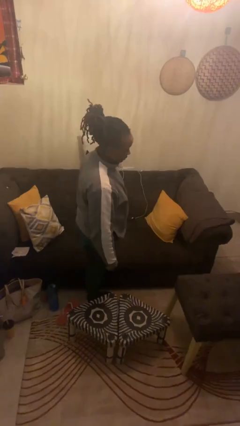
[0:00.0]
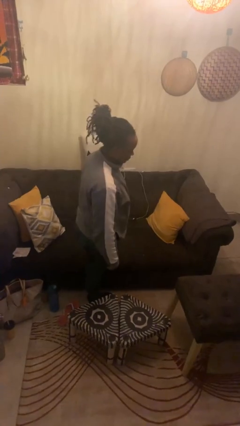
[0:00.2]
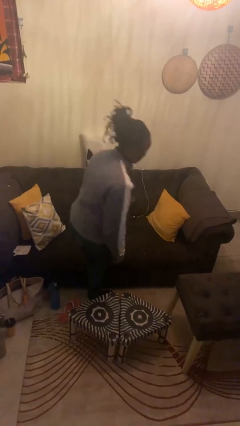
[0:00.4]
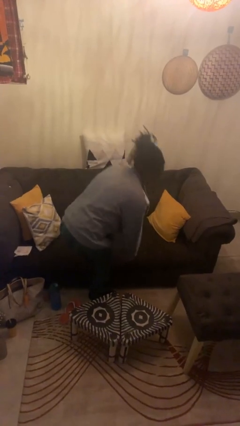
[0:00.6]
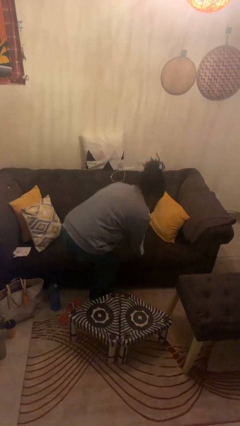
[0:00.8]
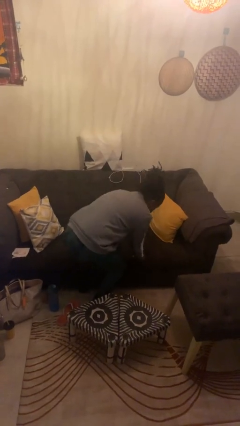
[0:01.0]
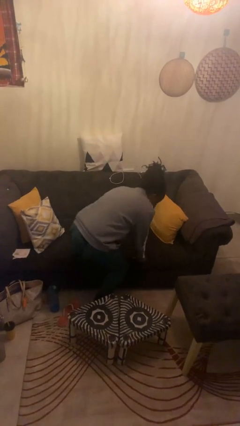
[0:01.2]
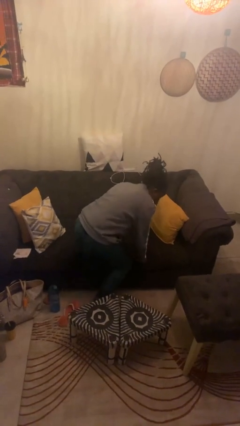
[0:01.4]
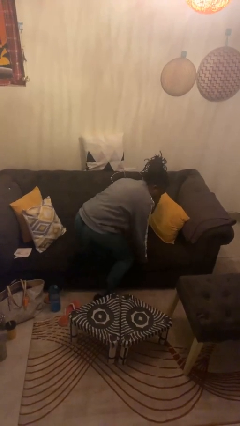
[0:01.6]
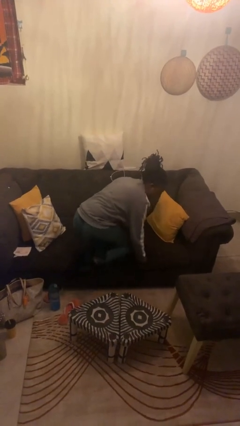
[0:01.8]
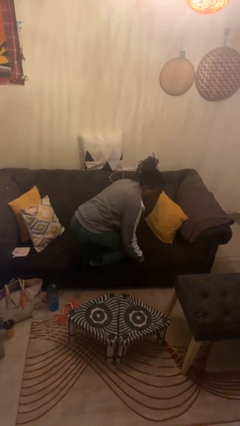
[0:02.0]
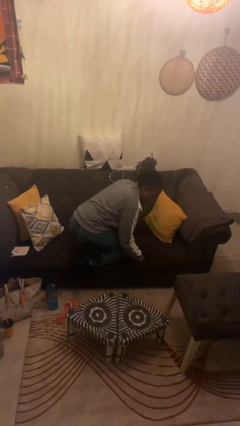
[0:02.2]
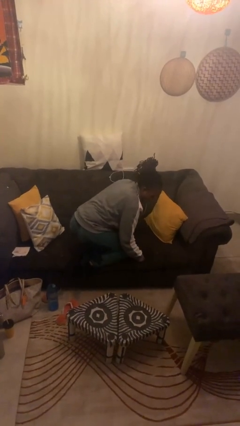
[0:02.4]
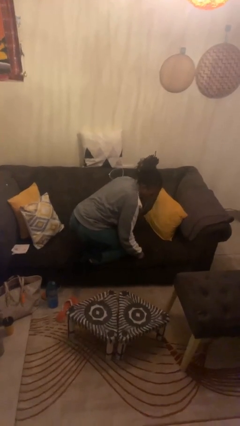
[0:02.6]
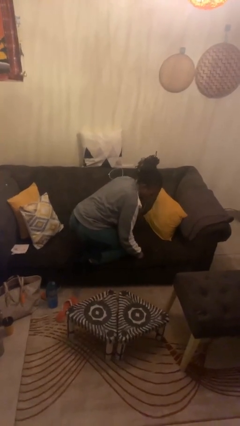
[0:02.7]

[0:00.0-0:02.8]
person climbs on couch

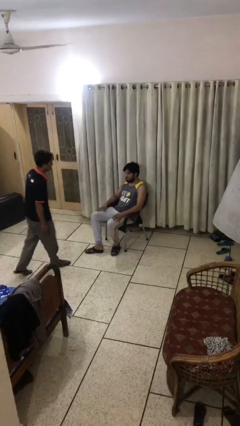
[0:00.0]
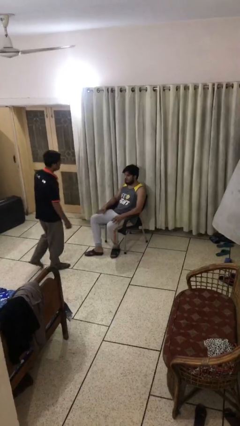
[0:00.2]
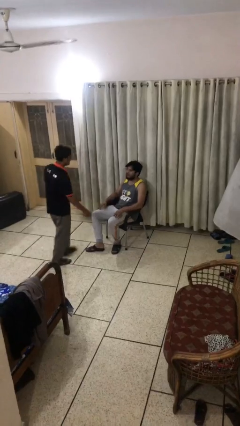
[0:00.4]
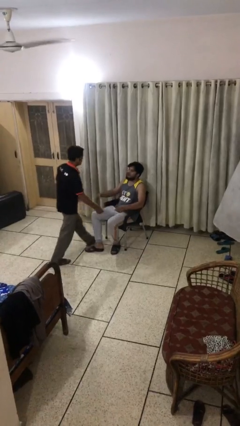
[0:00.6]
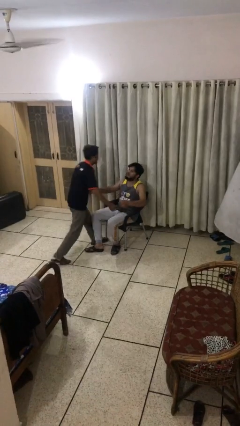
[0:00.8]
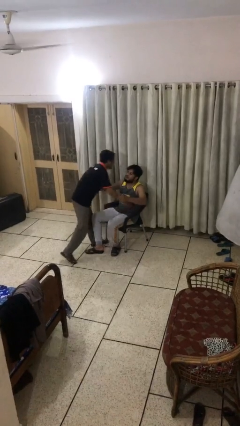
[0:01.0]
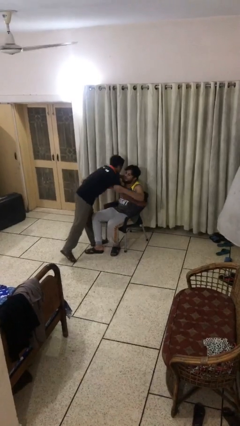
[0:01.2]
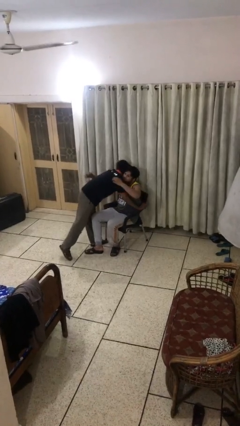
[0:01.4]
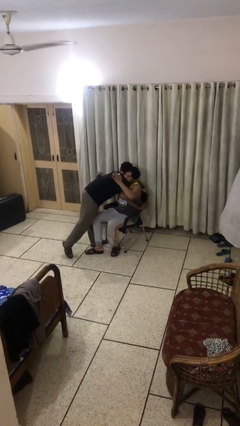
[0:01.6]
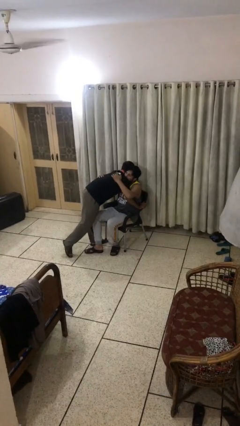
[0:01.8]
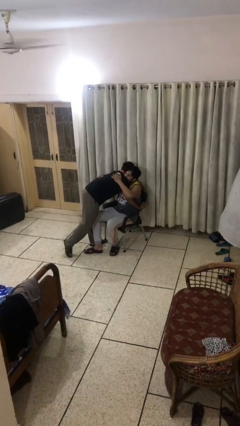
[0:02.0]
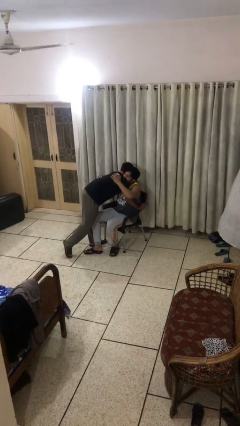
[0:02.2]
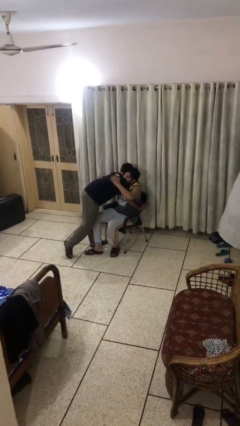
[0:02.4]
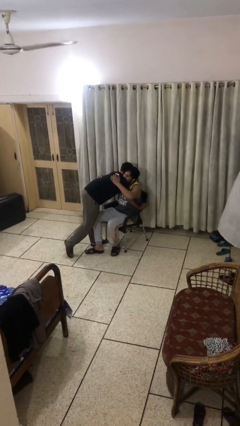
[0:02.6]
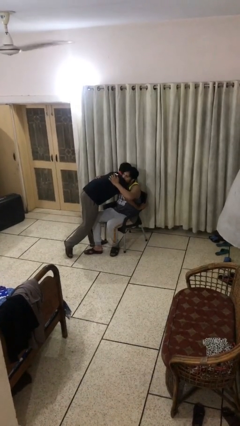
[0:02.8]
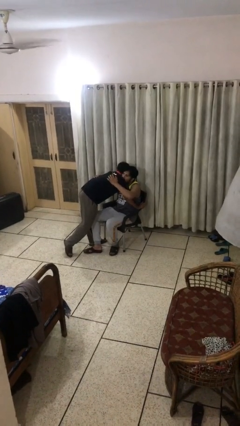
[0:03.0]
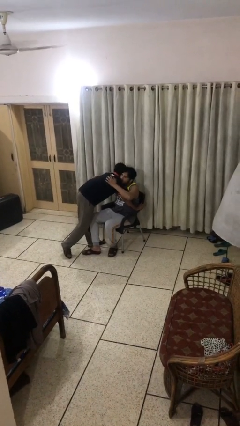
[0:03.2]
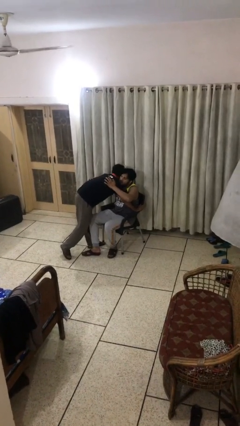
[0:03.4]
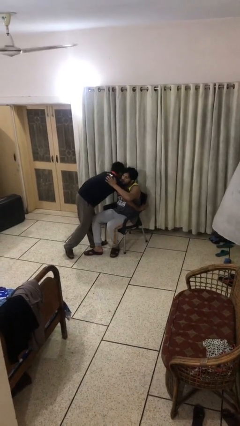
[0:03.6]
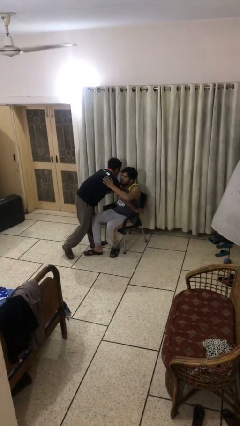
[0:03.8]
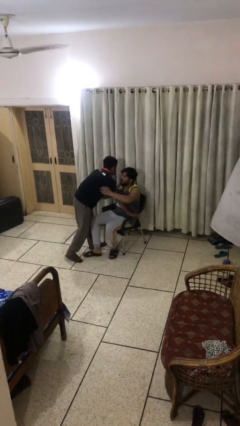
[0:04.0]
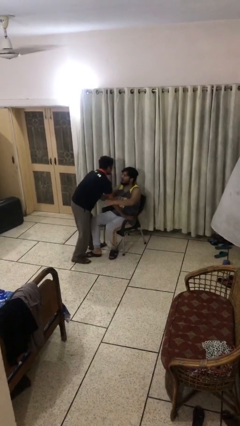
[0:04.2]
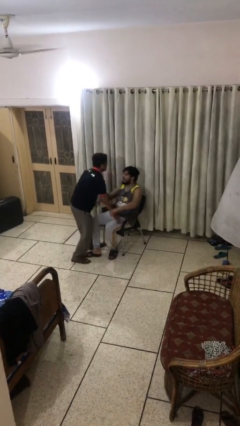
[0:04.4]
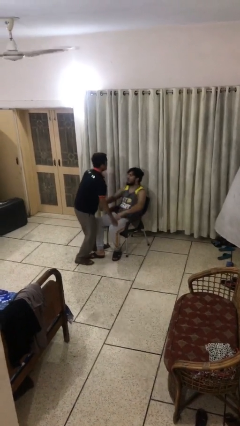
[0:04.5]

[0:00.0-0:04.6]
person embraces person

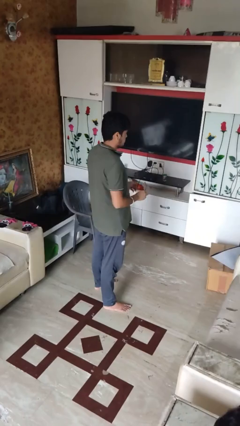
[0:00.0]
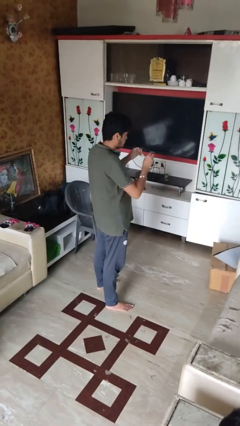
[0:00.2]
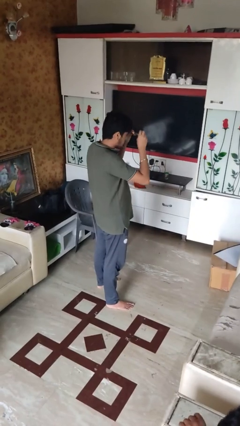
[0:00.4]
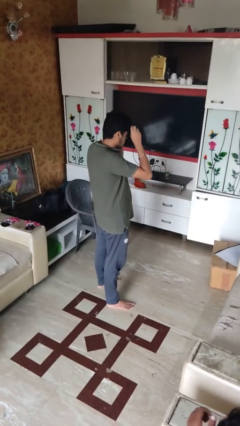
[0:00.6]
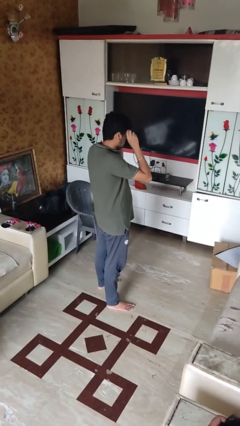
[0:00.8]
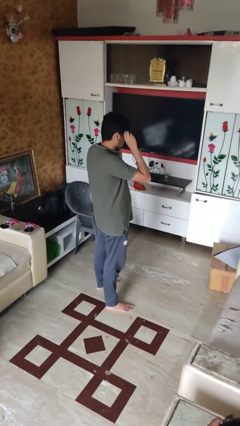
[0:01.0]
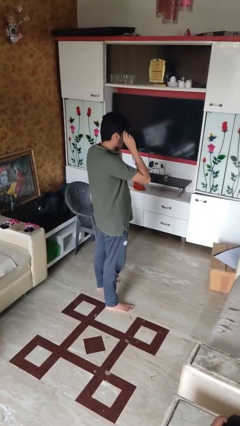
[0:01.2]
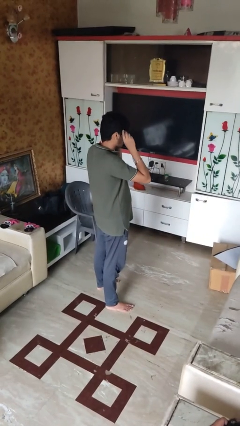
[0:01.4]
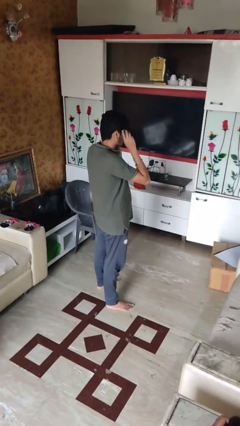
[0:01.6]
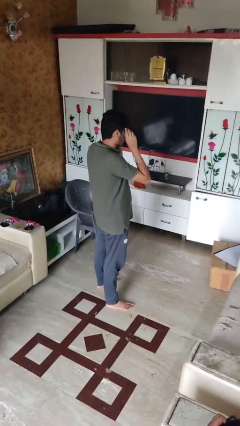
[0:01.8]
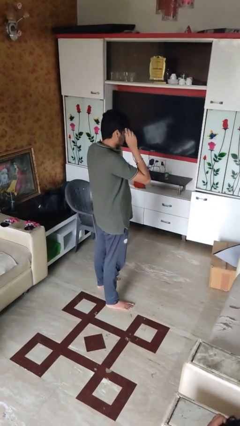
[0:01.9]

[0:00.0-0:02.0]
person puts on glasses

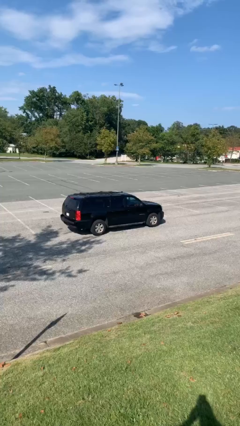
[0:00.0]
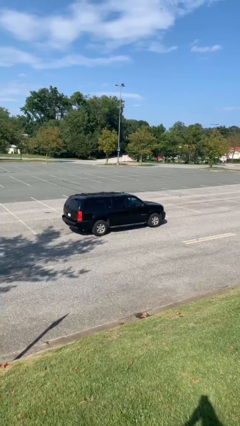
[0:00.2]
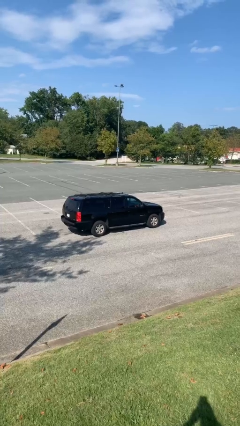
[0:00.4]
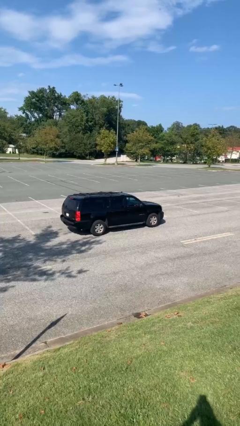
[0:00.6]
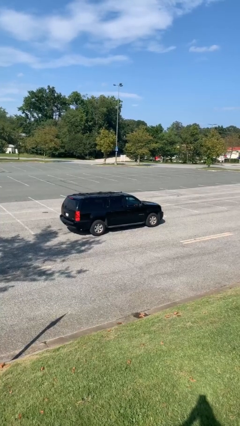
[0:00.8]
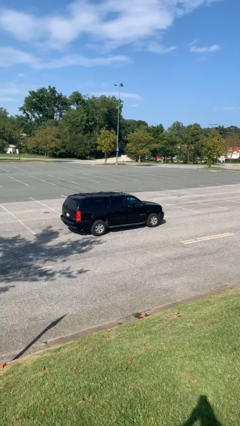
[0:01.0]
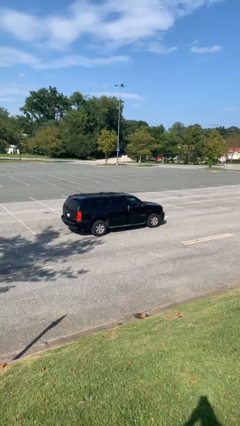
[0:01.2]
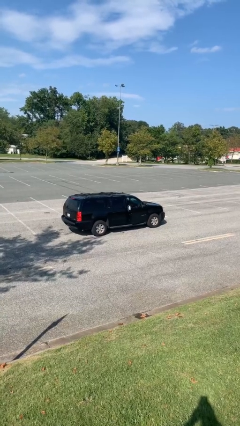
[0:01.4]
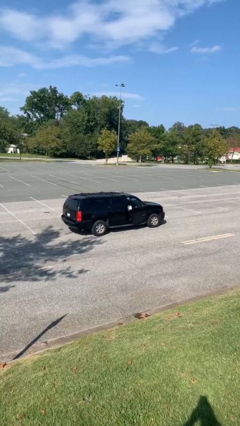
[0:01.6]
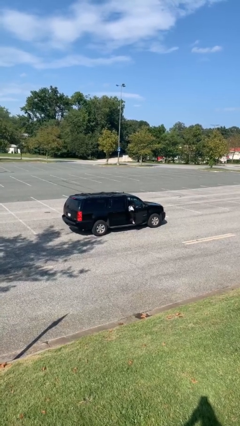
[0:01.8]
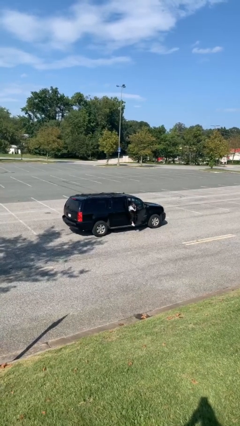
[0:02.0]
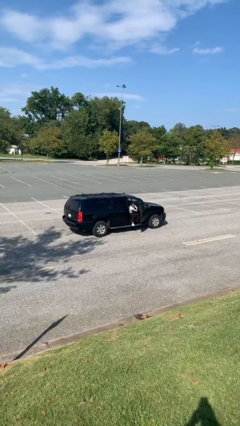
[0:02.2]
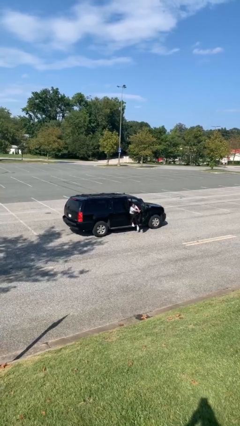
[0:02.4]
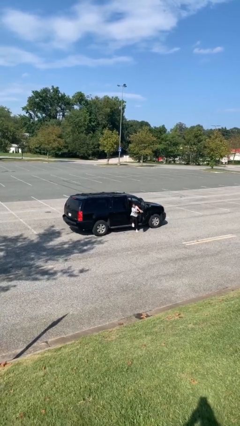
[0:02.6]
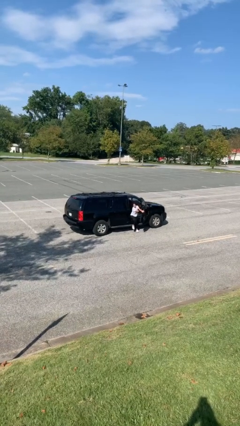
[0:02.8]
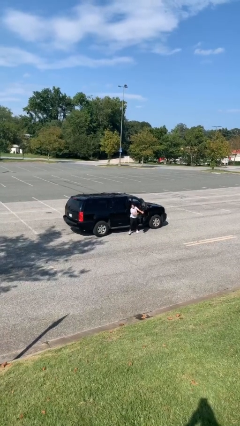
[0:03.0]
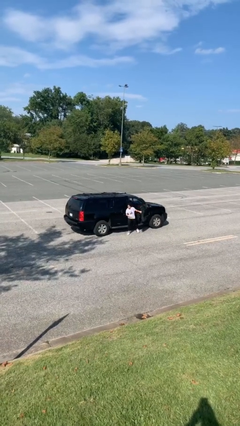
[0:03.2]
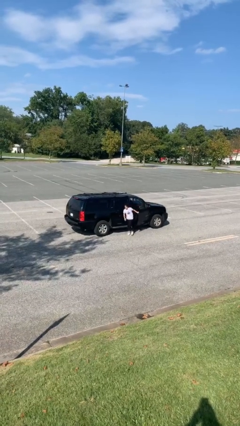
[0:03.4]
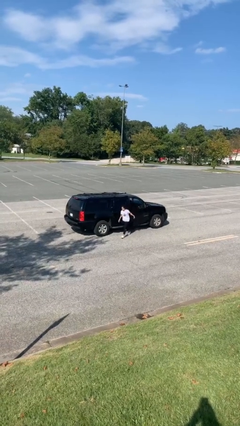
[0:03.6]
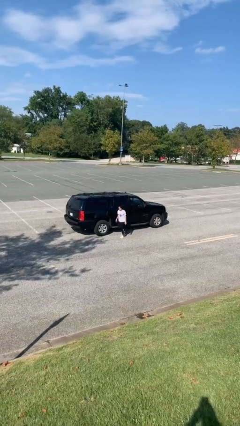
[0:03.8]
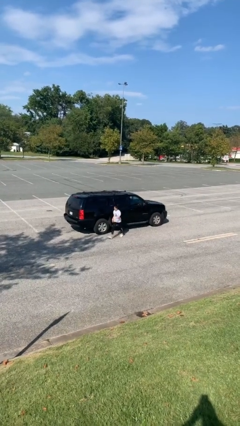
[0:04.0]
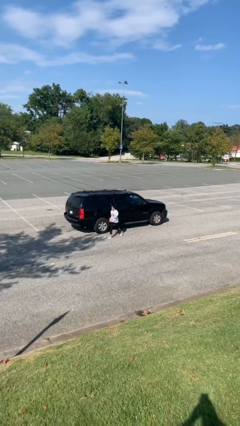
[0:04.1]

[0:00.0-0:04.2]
car drops off person

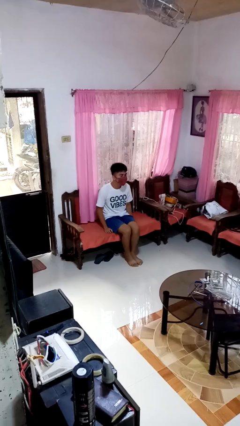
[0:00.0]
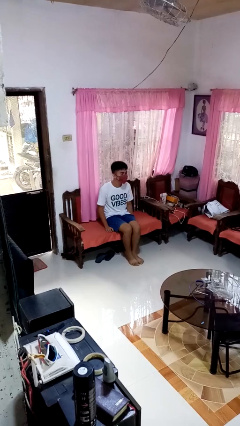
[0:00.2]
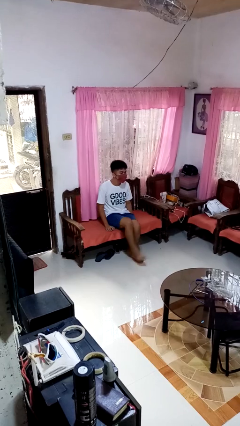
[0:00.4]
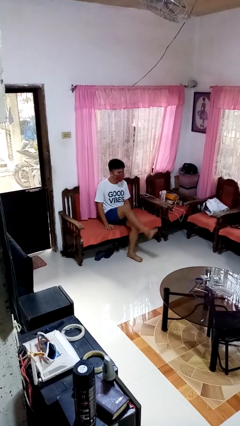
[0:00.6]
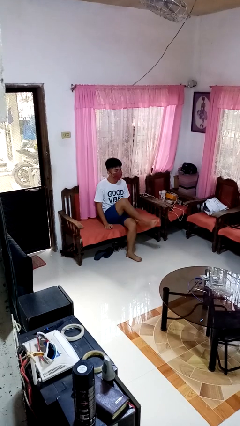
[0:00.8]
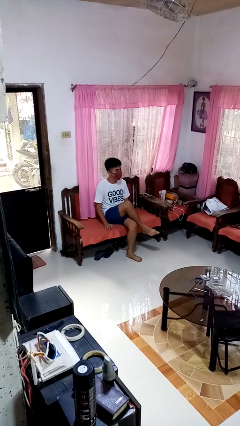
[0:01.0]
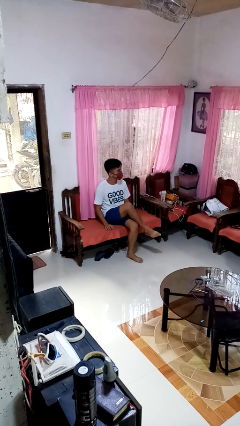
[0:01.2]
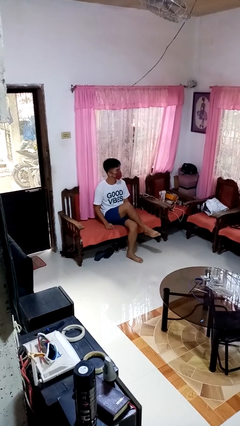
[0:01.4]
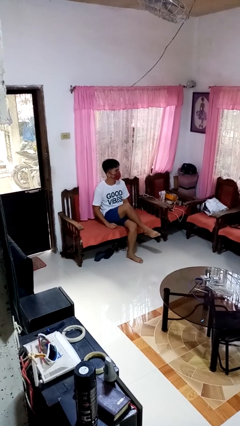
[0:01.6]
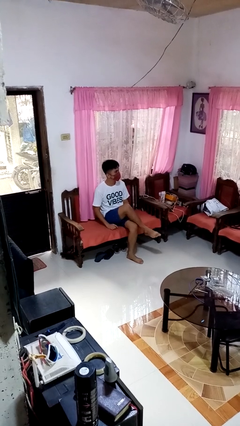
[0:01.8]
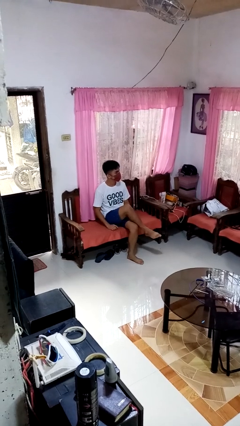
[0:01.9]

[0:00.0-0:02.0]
person crosses legs

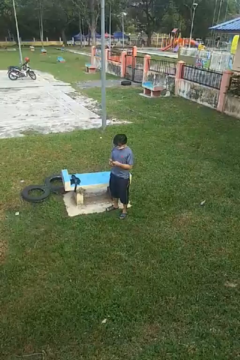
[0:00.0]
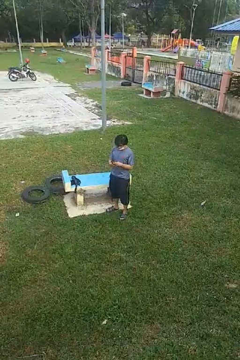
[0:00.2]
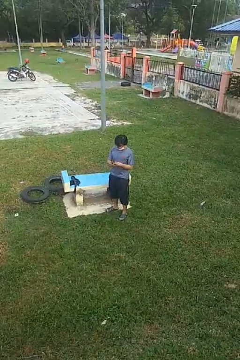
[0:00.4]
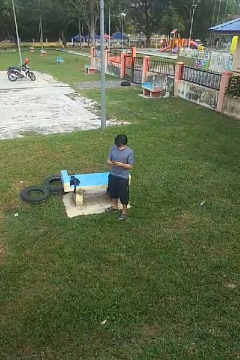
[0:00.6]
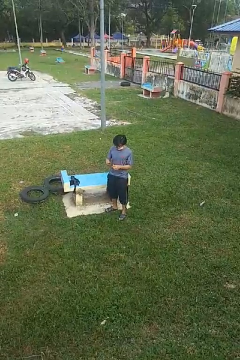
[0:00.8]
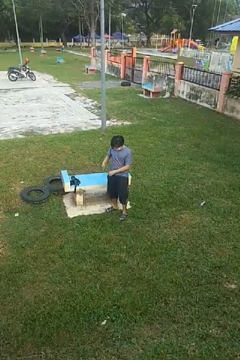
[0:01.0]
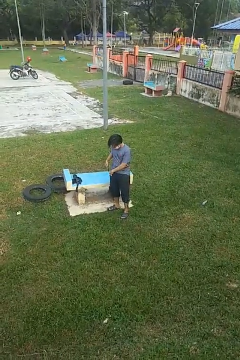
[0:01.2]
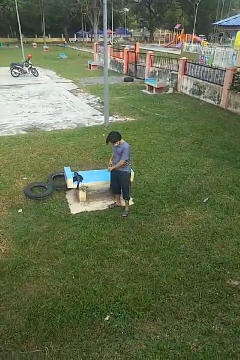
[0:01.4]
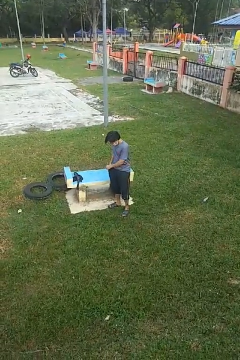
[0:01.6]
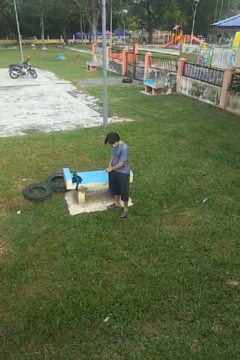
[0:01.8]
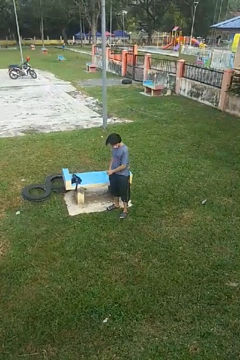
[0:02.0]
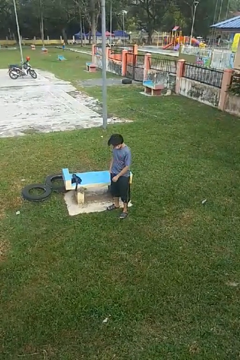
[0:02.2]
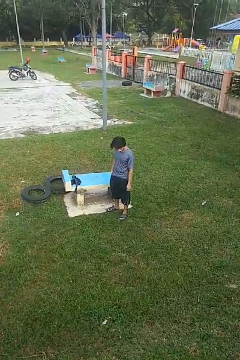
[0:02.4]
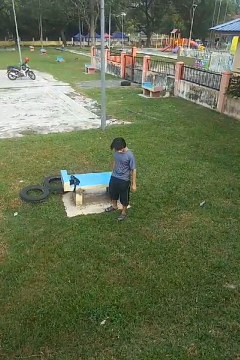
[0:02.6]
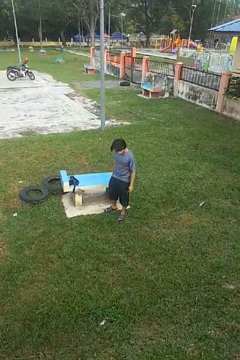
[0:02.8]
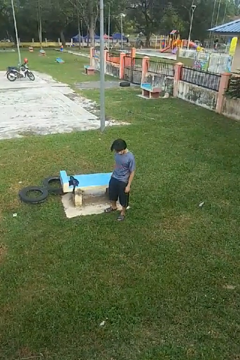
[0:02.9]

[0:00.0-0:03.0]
person puts phone into pocket
